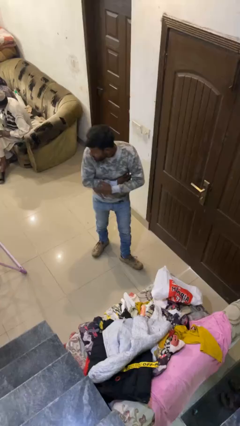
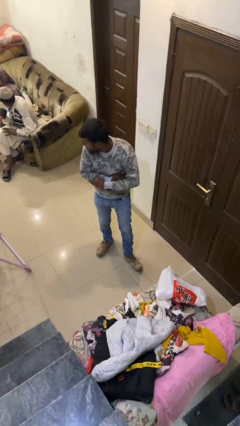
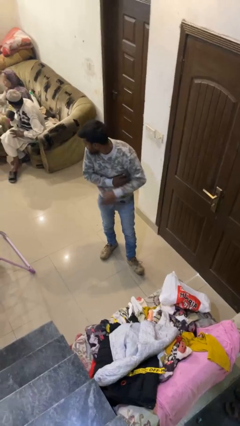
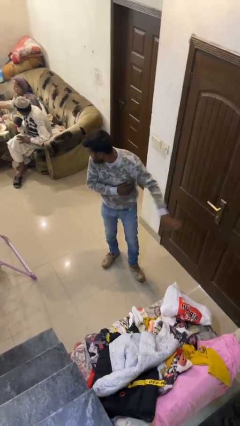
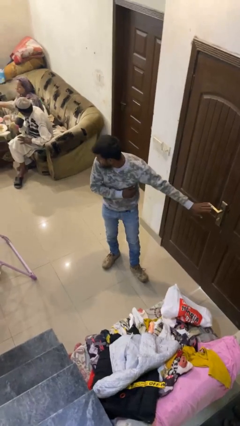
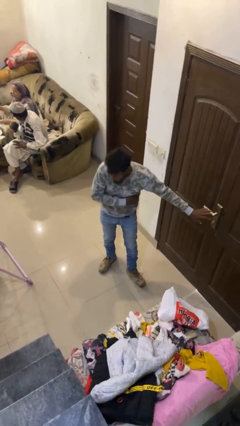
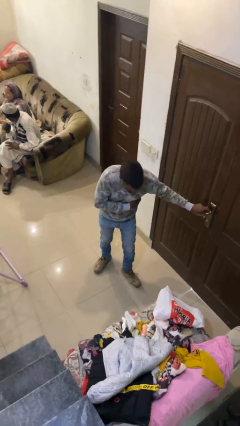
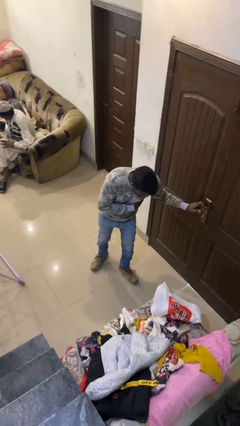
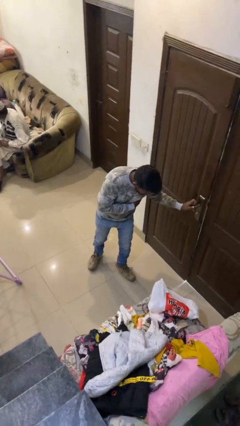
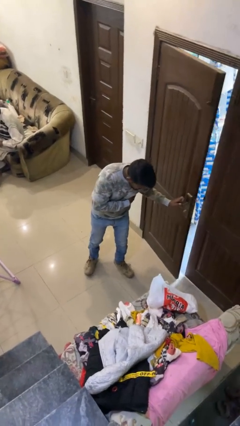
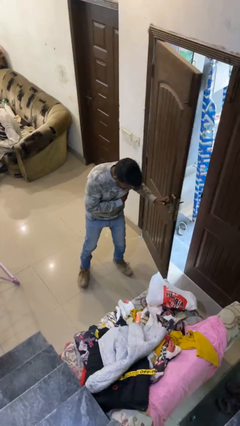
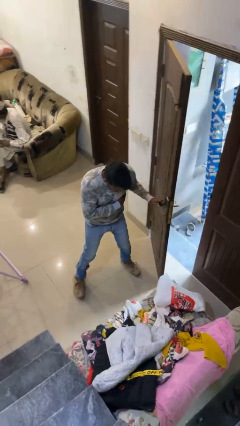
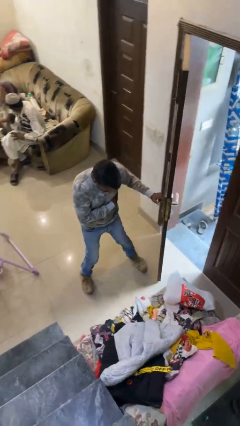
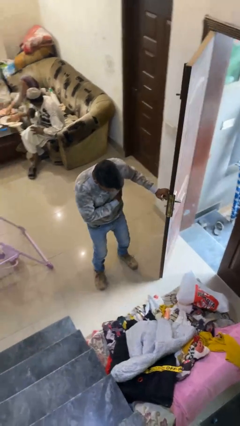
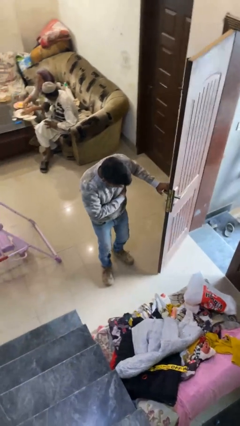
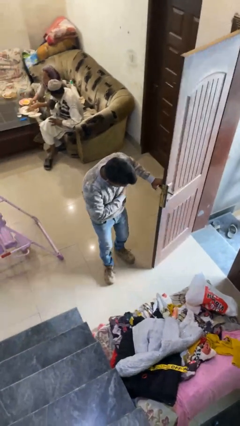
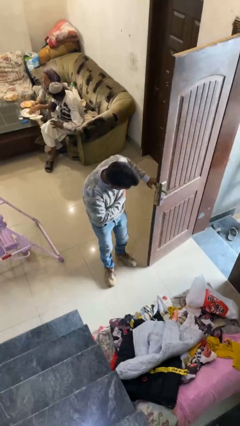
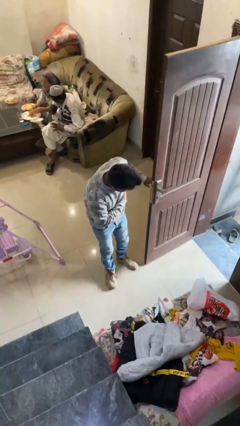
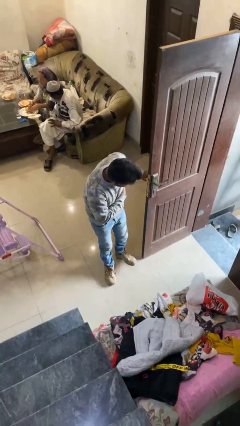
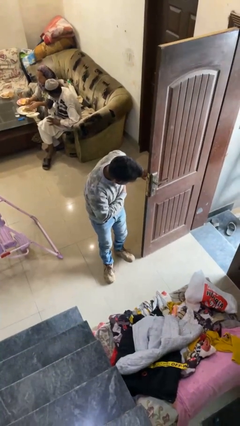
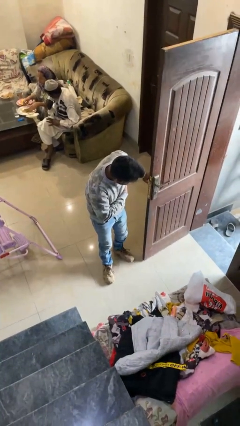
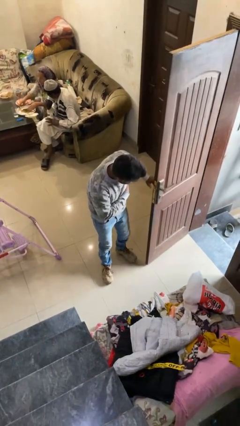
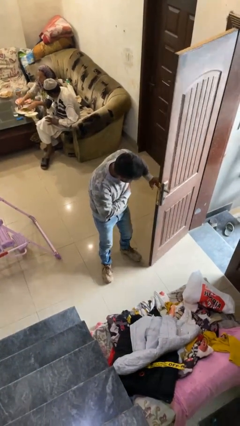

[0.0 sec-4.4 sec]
person opens facility door

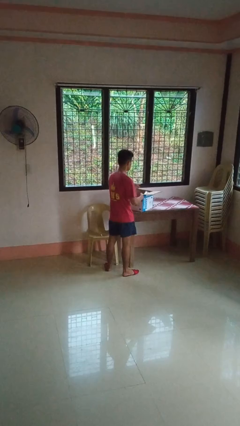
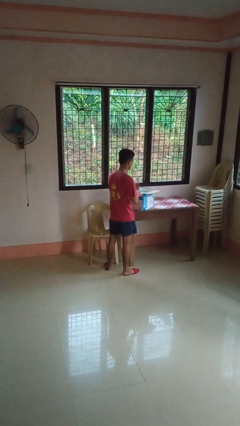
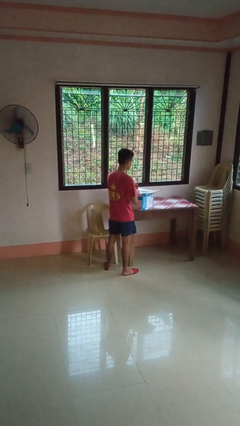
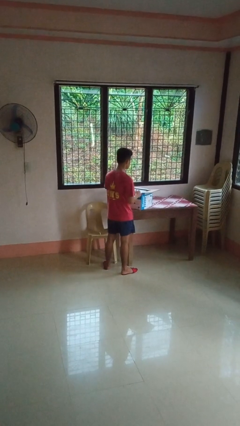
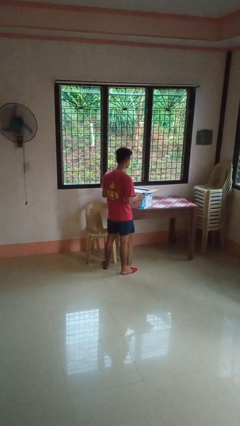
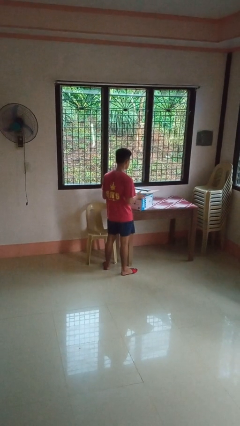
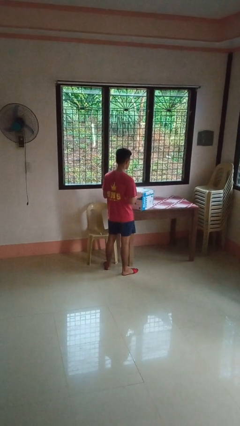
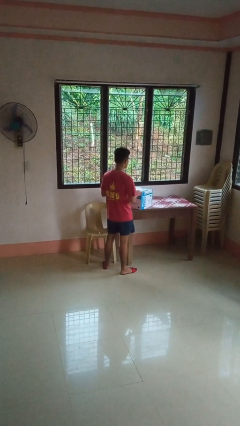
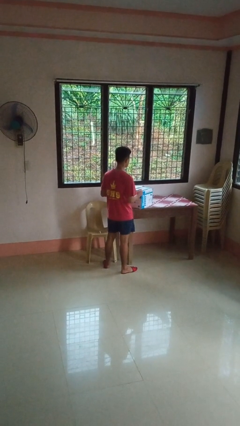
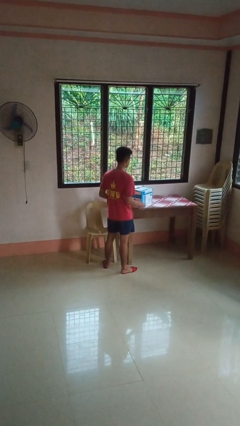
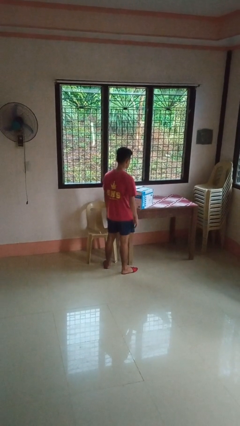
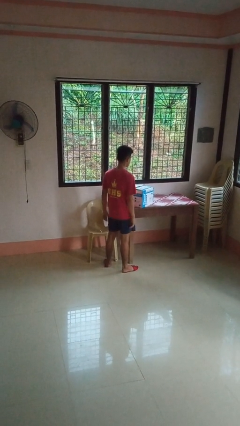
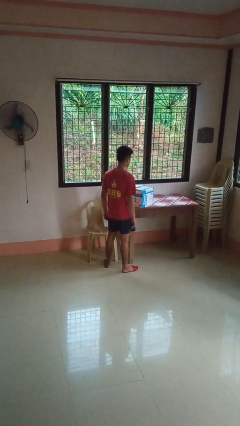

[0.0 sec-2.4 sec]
person closes box

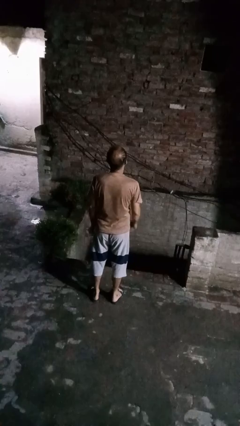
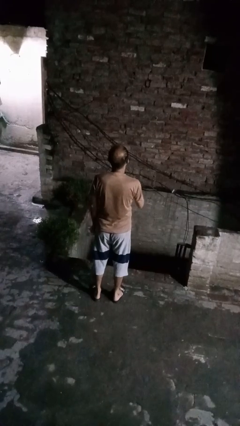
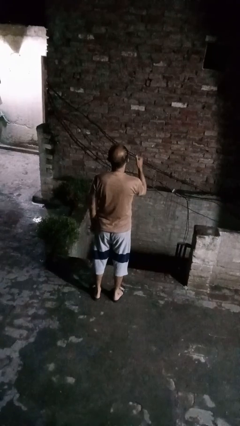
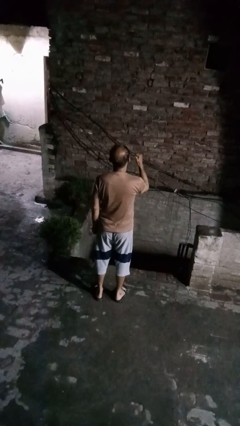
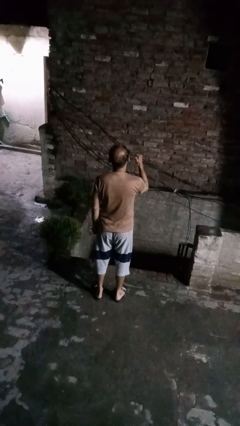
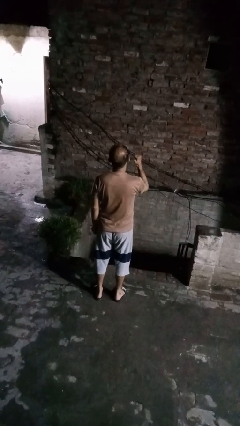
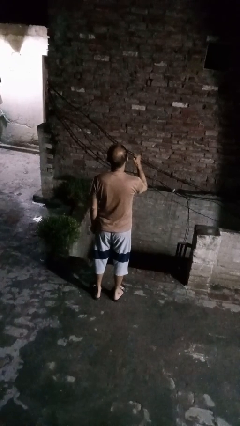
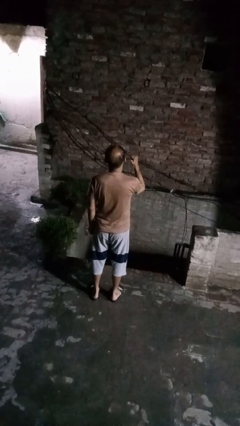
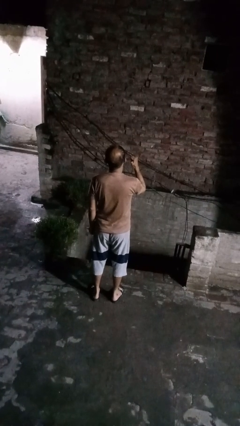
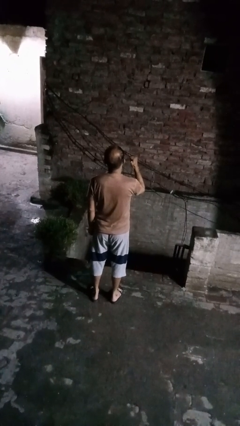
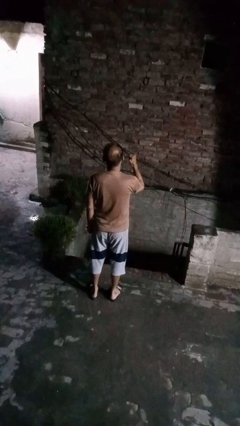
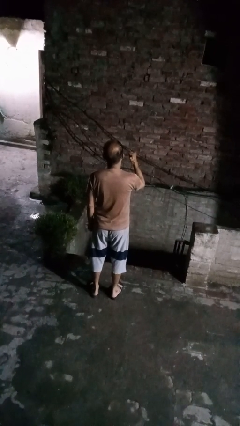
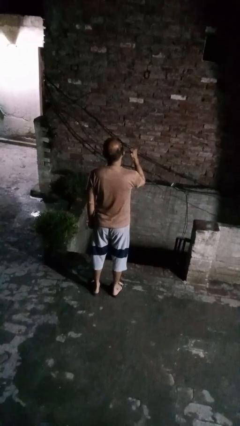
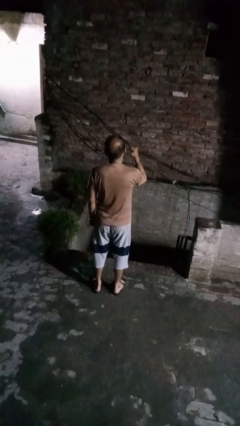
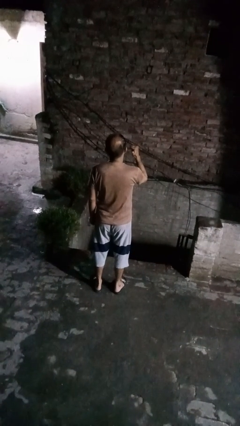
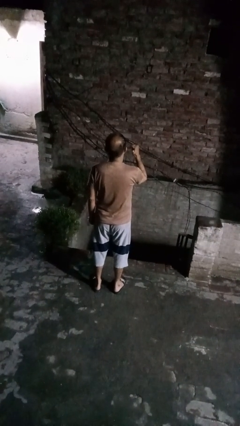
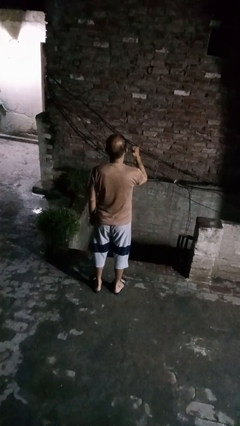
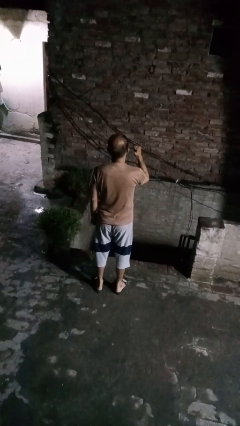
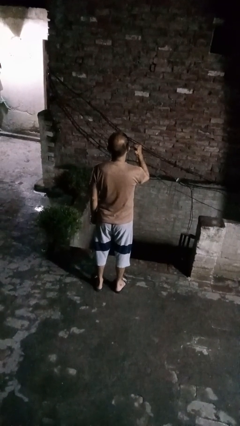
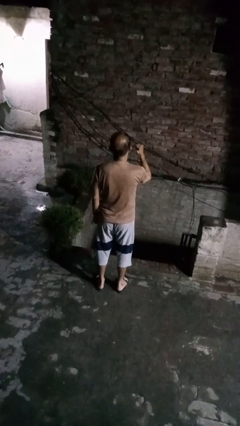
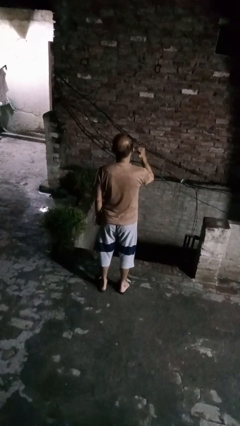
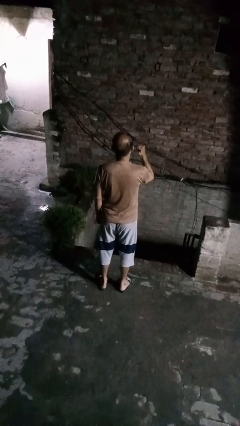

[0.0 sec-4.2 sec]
person gestures behind me

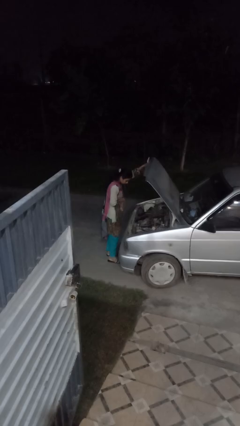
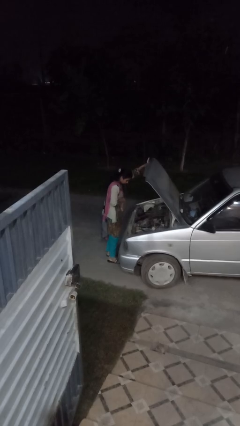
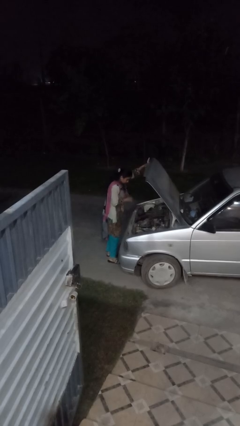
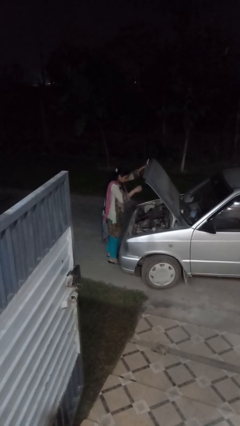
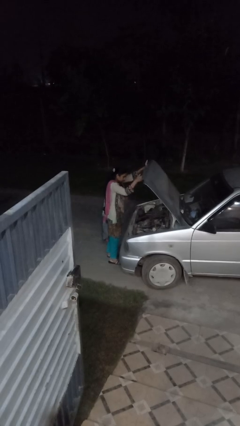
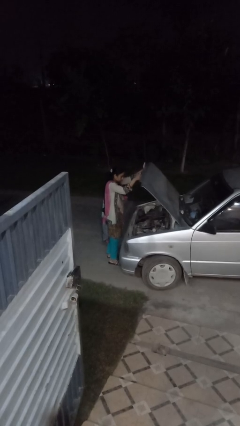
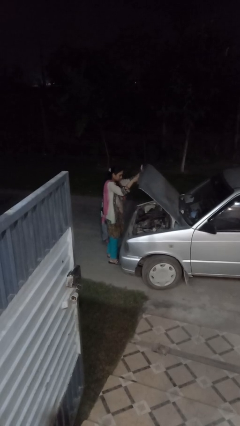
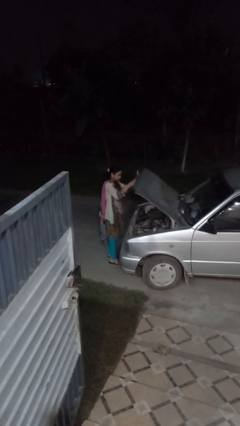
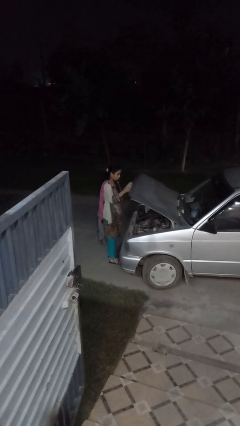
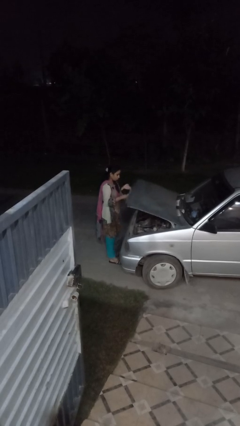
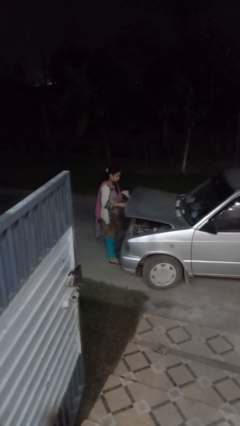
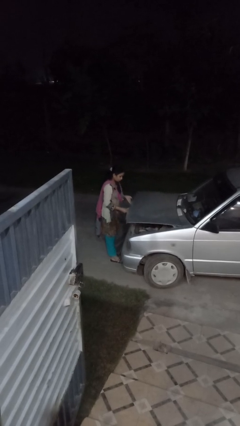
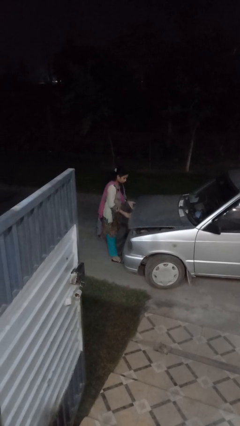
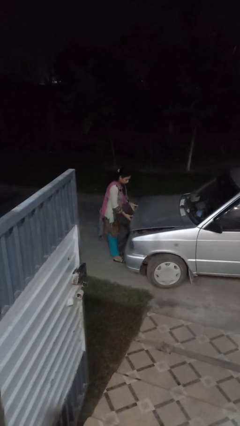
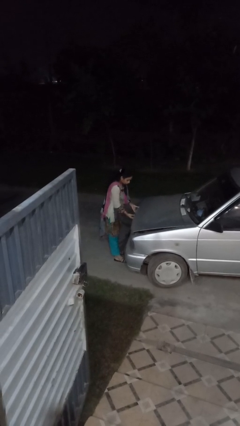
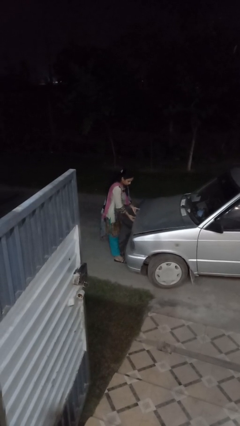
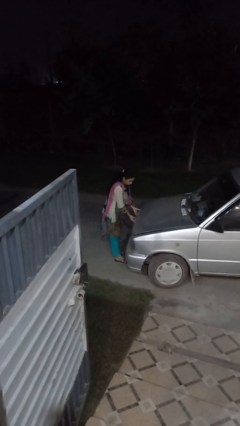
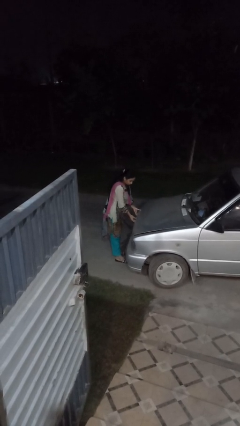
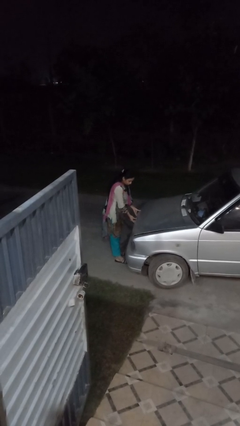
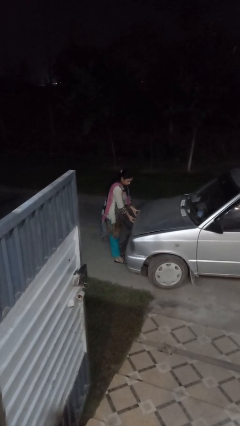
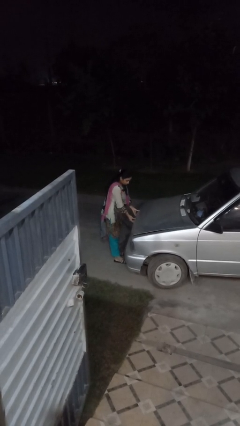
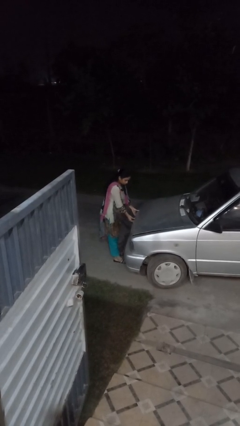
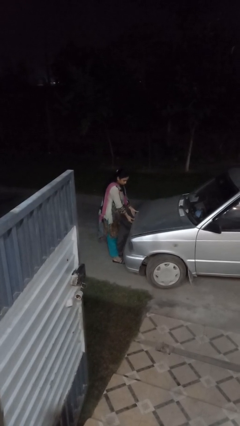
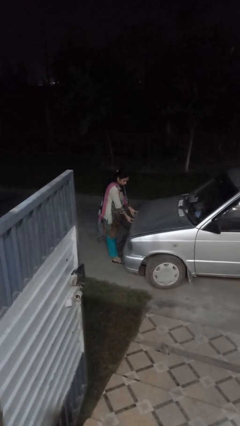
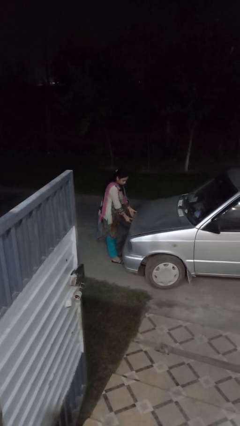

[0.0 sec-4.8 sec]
person closes car hood

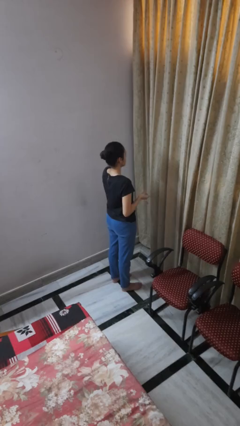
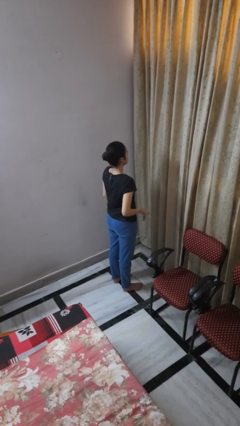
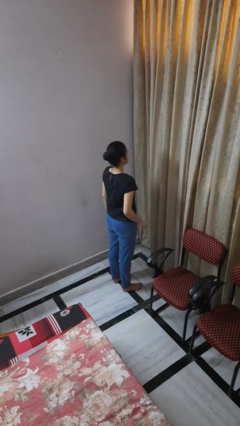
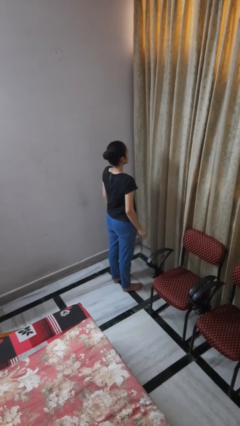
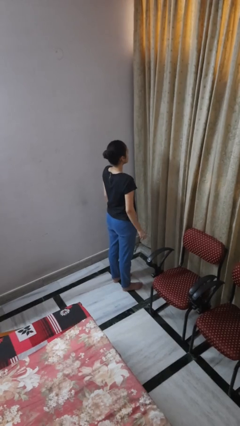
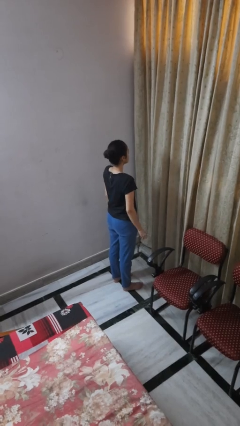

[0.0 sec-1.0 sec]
person takes off wristwatch

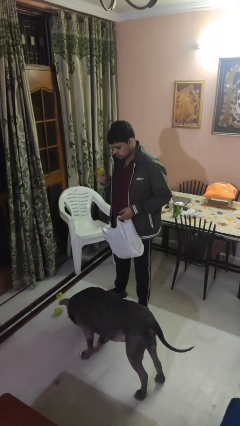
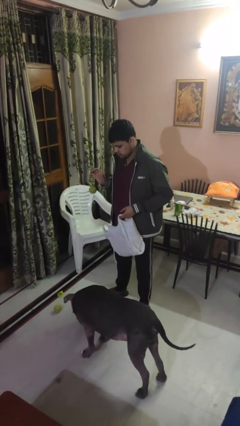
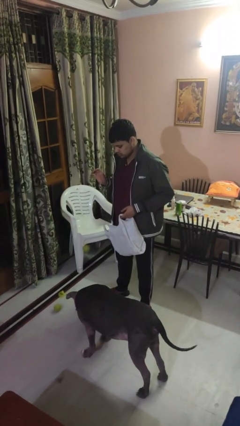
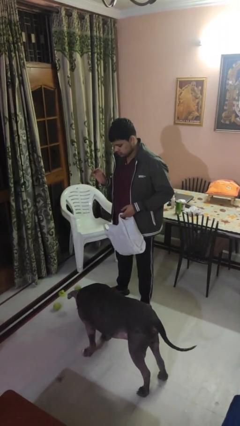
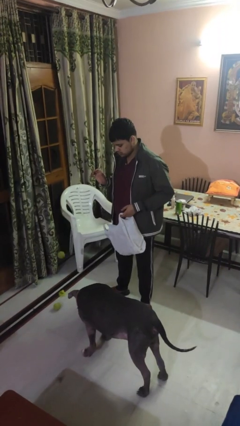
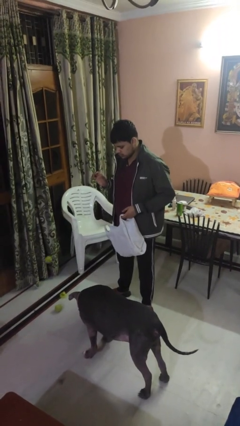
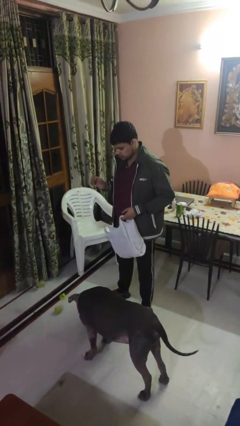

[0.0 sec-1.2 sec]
person throws object to dog
